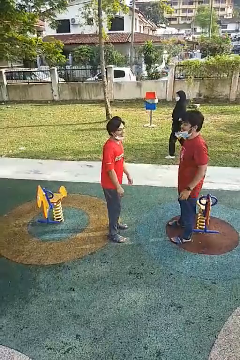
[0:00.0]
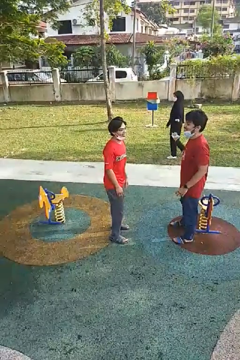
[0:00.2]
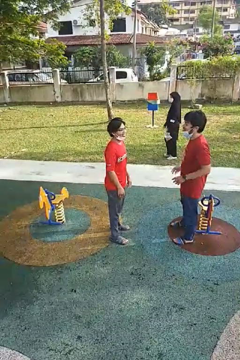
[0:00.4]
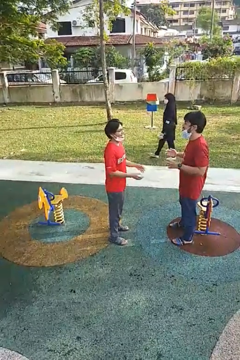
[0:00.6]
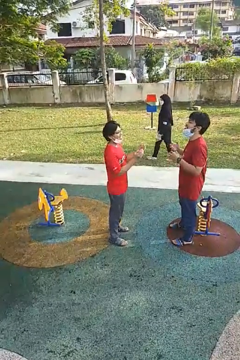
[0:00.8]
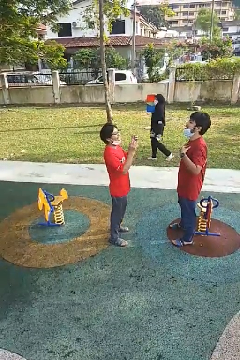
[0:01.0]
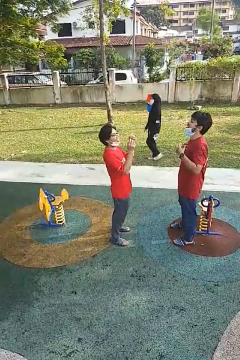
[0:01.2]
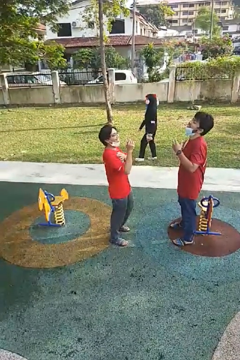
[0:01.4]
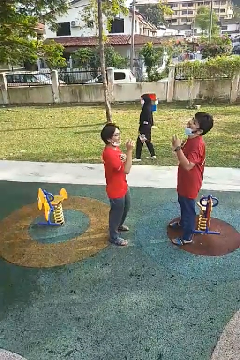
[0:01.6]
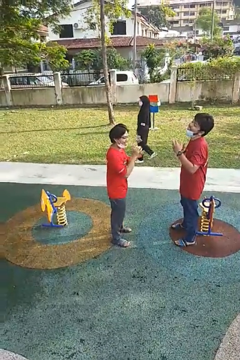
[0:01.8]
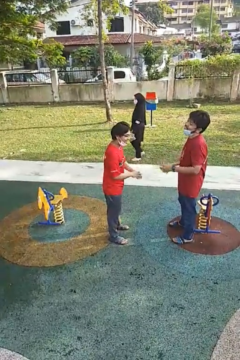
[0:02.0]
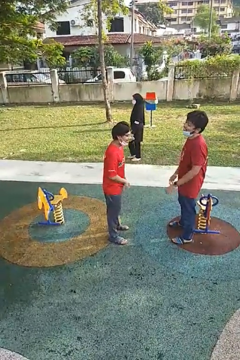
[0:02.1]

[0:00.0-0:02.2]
person laughs with person

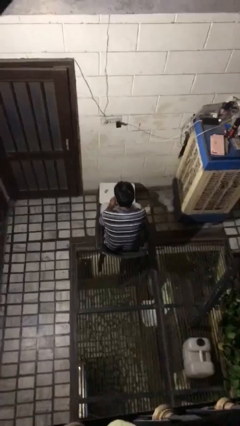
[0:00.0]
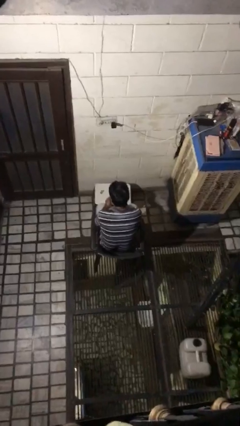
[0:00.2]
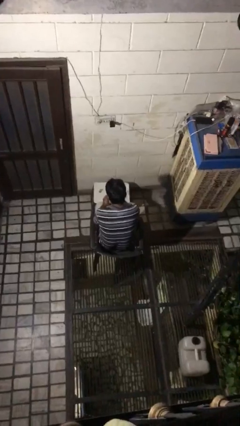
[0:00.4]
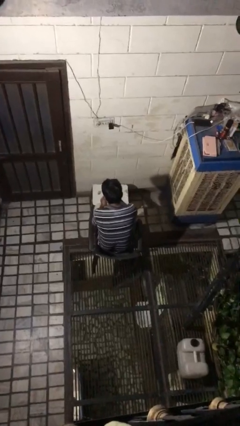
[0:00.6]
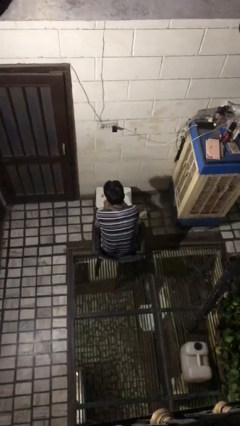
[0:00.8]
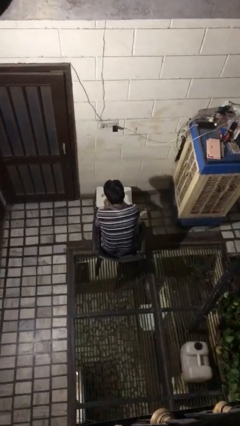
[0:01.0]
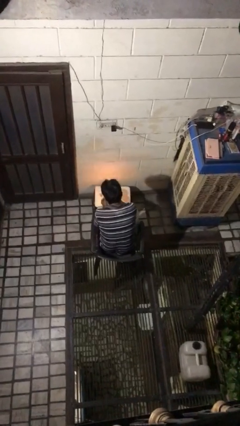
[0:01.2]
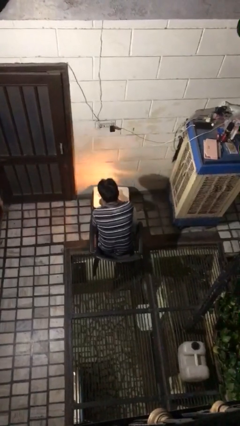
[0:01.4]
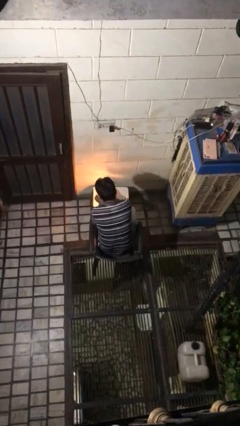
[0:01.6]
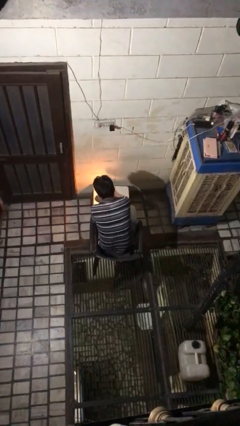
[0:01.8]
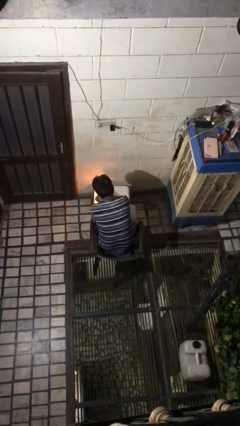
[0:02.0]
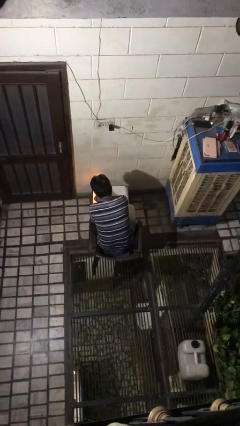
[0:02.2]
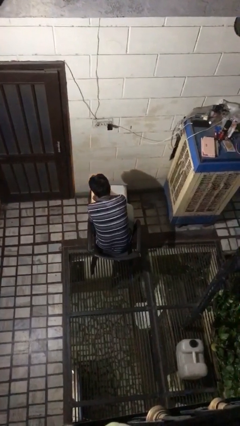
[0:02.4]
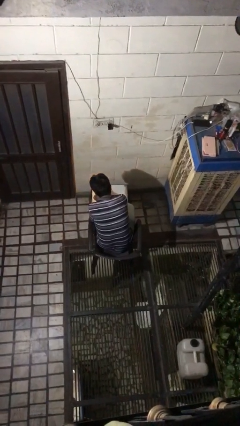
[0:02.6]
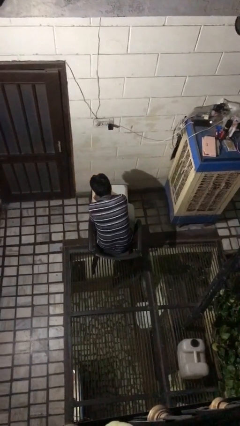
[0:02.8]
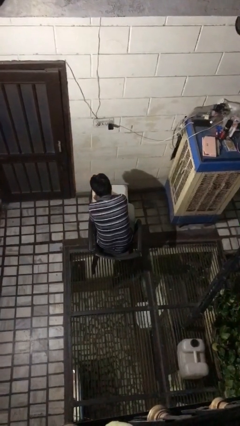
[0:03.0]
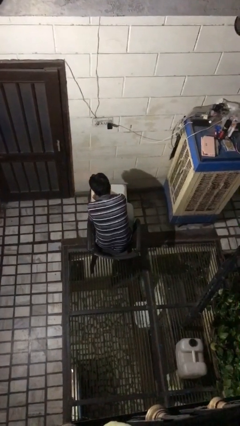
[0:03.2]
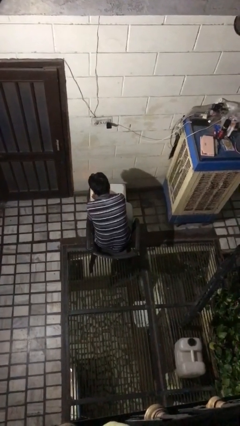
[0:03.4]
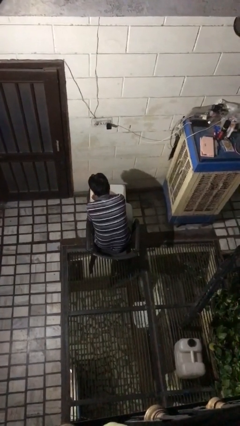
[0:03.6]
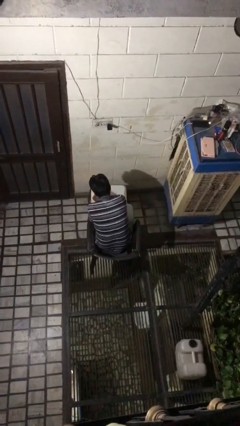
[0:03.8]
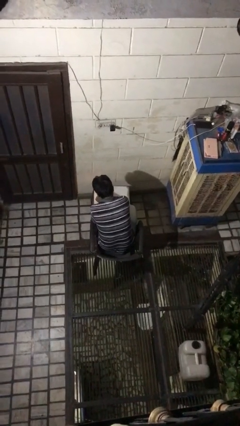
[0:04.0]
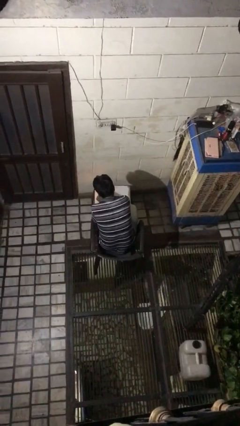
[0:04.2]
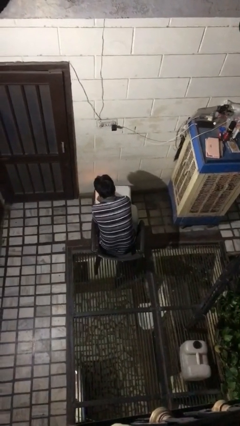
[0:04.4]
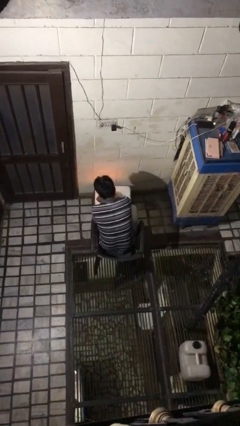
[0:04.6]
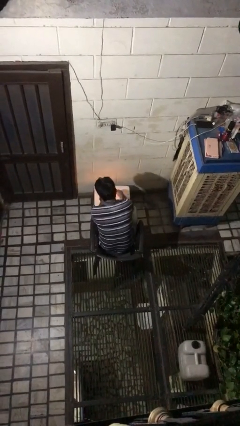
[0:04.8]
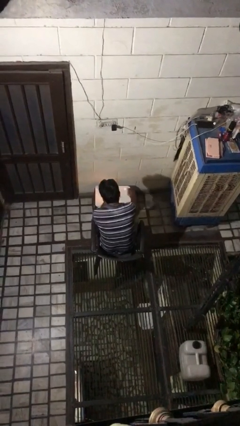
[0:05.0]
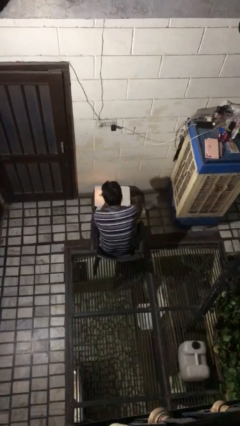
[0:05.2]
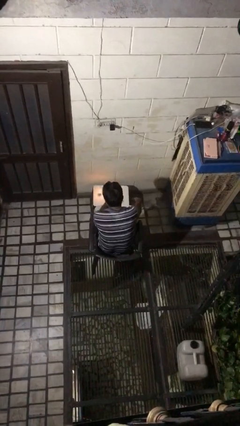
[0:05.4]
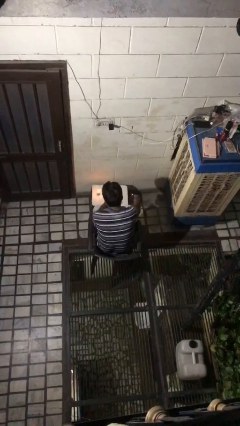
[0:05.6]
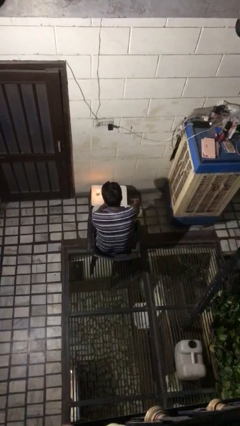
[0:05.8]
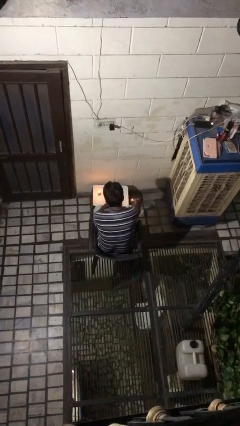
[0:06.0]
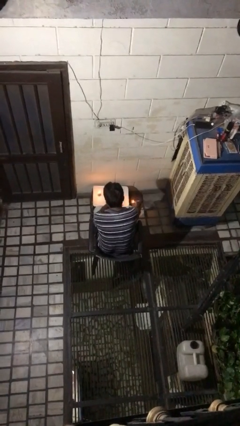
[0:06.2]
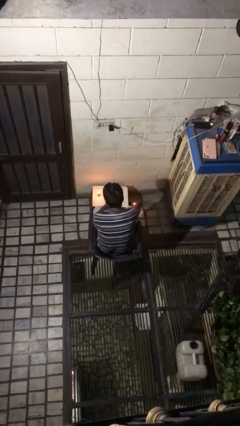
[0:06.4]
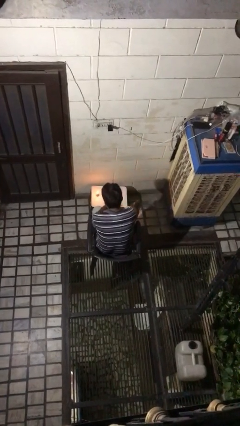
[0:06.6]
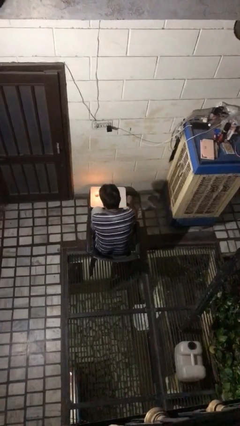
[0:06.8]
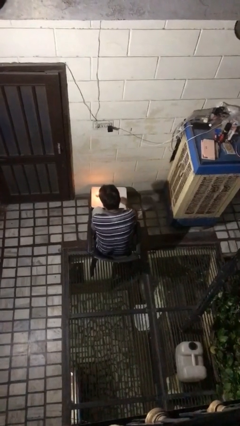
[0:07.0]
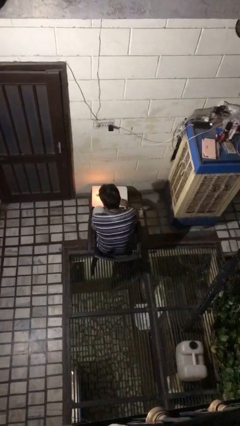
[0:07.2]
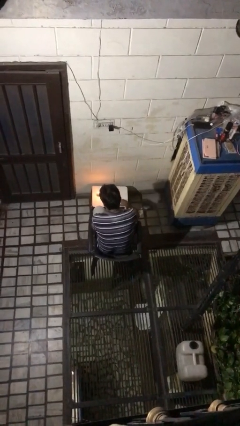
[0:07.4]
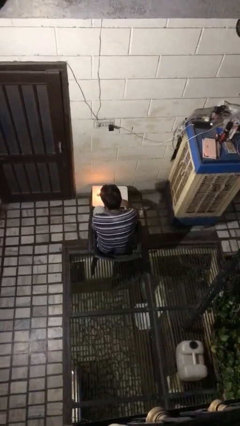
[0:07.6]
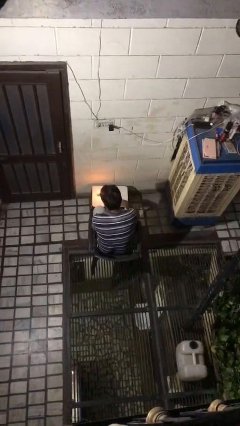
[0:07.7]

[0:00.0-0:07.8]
person lights candle

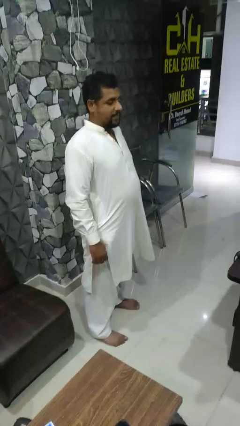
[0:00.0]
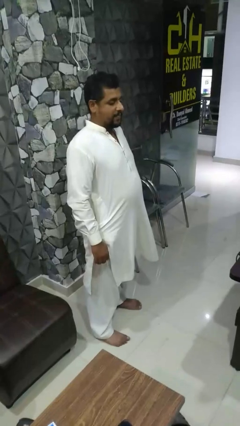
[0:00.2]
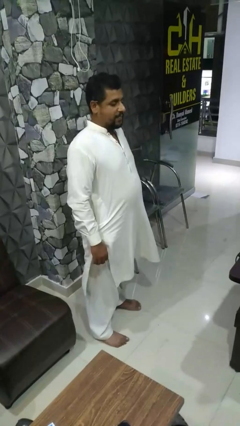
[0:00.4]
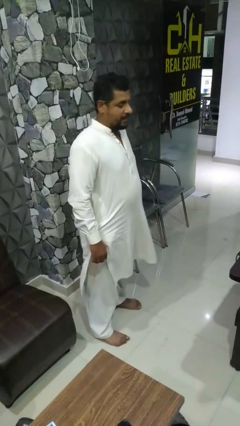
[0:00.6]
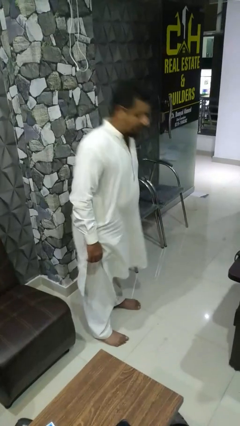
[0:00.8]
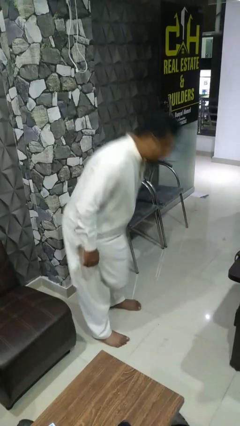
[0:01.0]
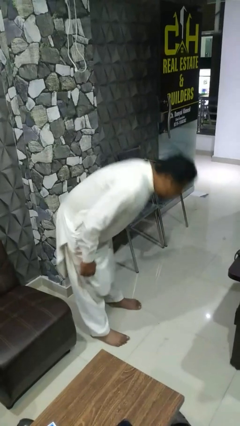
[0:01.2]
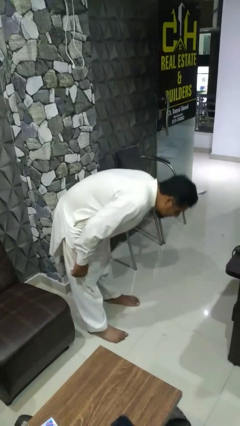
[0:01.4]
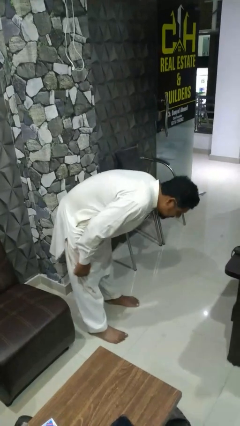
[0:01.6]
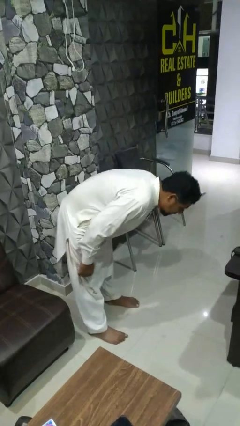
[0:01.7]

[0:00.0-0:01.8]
person bows

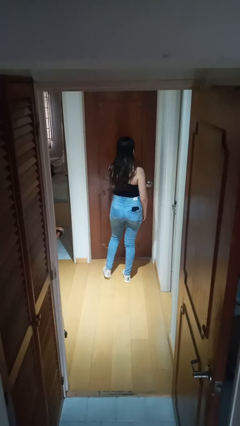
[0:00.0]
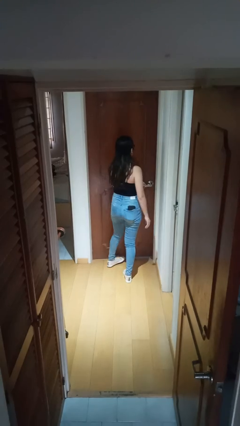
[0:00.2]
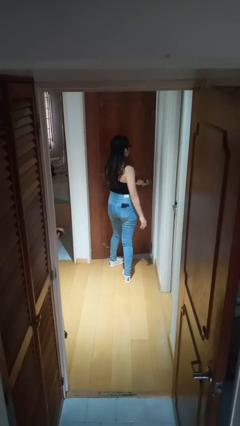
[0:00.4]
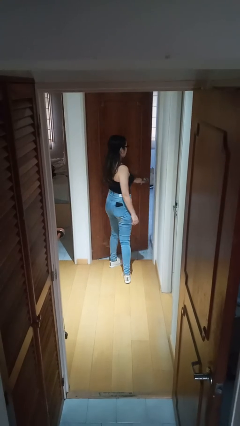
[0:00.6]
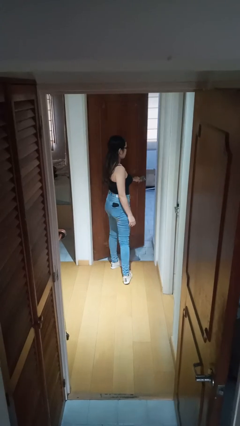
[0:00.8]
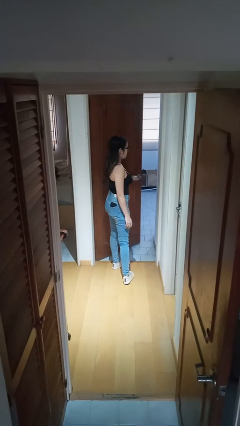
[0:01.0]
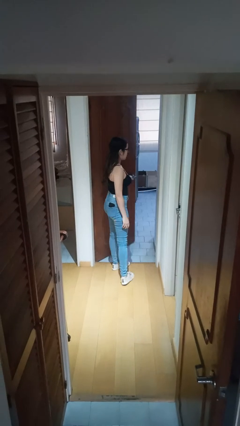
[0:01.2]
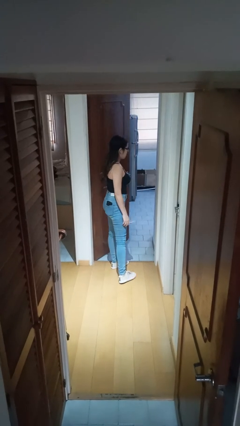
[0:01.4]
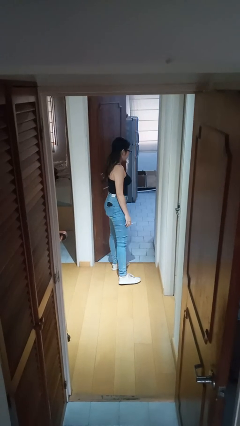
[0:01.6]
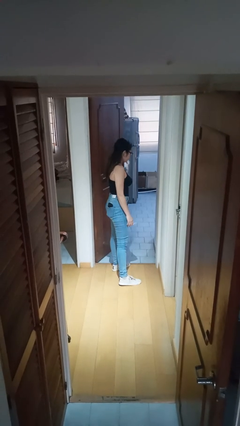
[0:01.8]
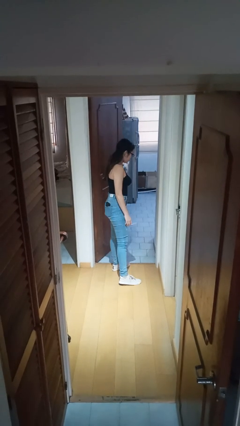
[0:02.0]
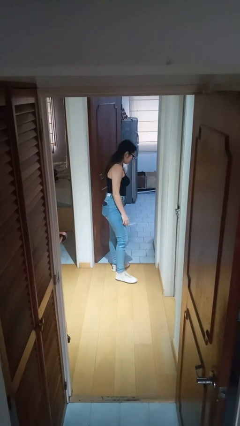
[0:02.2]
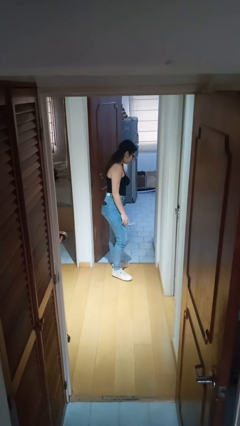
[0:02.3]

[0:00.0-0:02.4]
person opens facility door

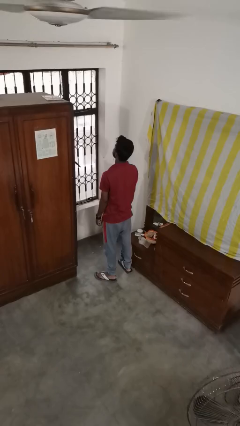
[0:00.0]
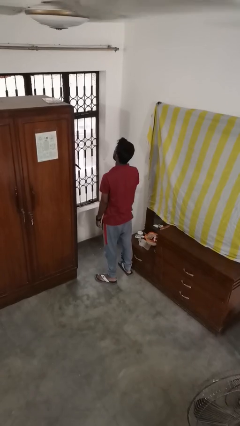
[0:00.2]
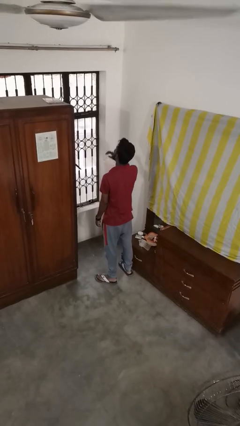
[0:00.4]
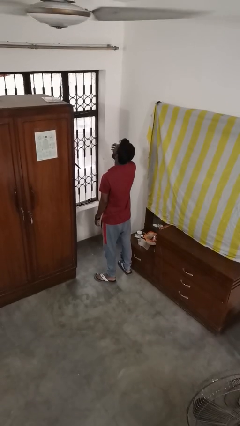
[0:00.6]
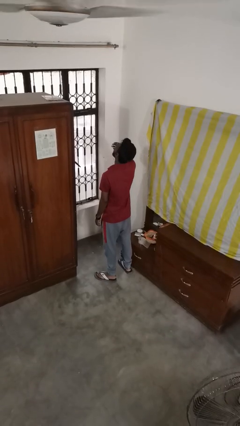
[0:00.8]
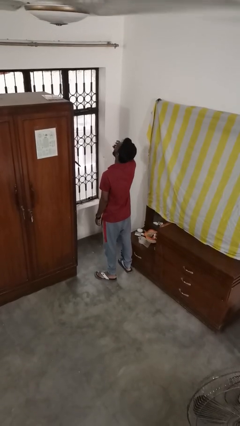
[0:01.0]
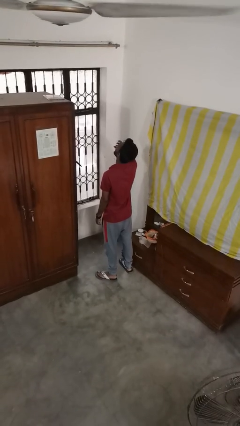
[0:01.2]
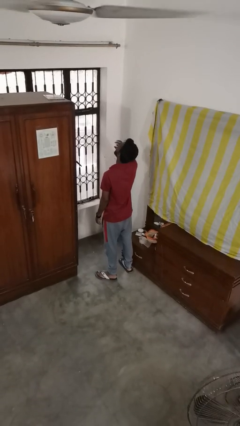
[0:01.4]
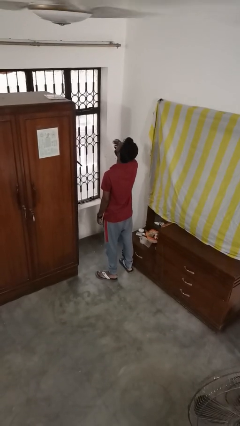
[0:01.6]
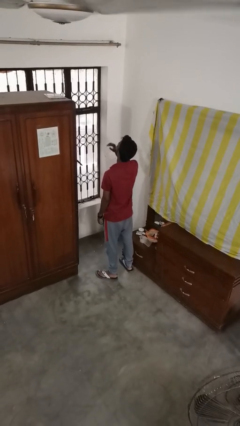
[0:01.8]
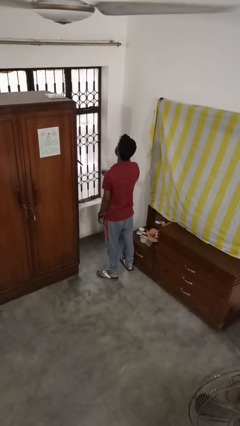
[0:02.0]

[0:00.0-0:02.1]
person yawns

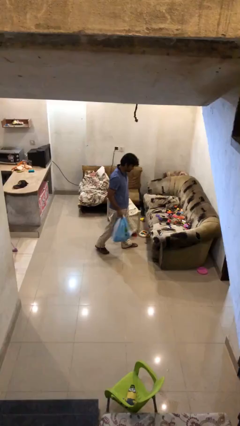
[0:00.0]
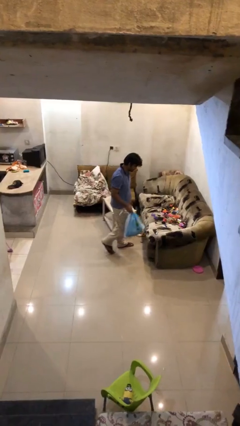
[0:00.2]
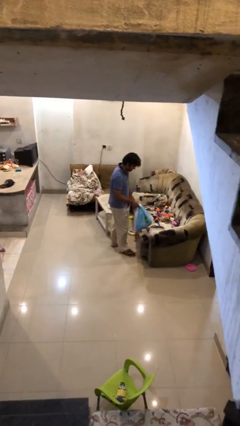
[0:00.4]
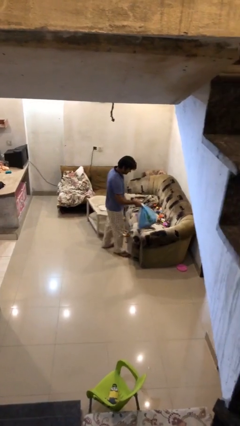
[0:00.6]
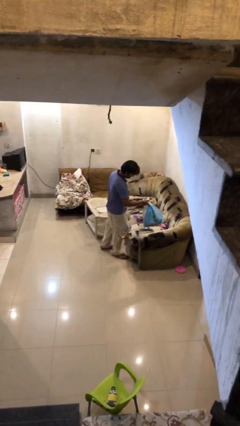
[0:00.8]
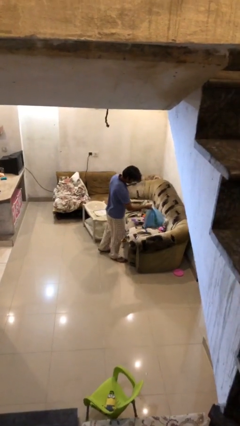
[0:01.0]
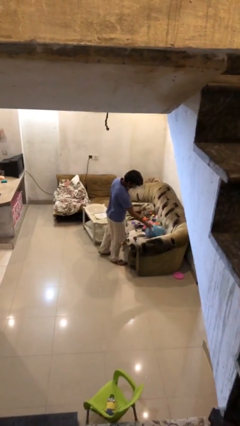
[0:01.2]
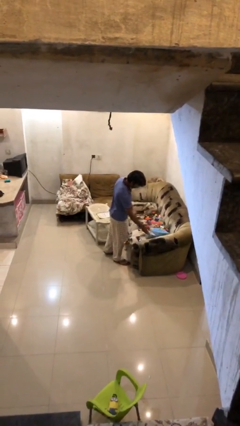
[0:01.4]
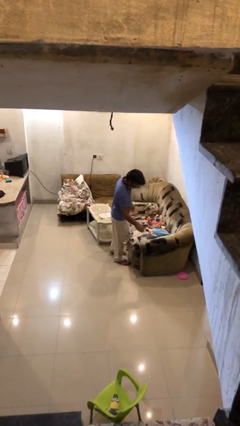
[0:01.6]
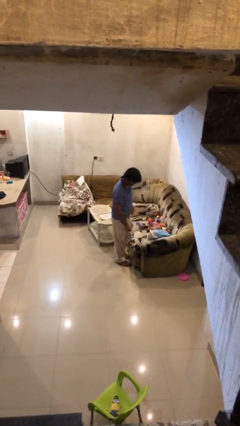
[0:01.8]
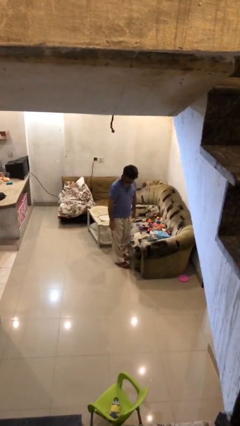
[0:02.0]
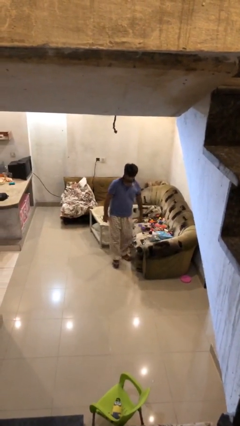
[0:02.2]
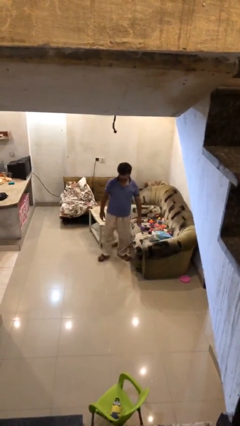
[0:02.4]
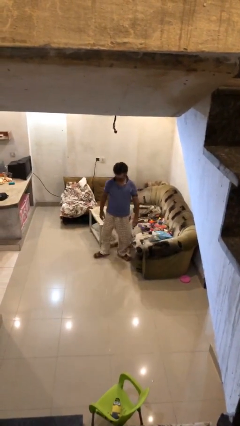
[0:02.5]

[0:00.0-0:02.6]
person puts down object on table
